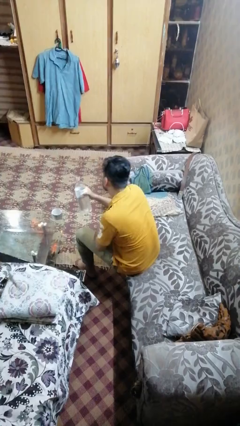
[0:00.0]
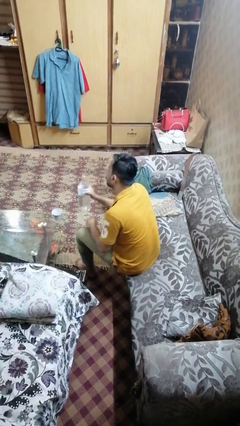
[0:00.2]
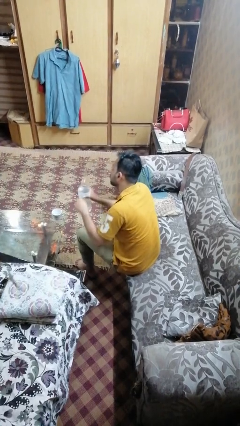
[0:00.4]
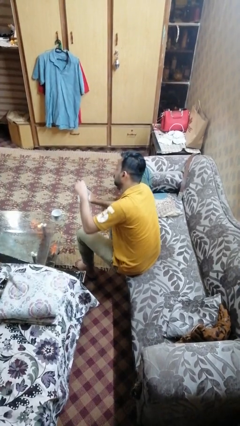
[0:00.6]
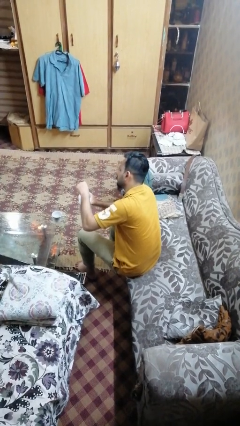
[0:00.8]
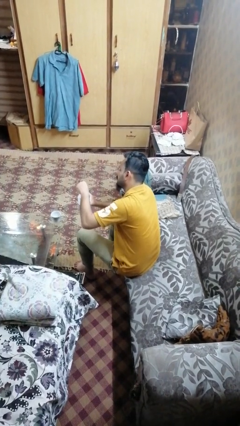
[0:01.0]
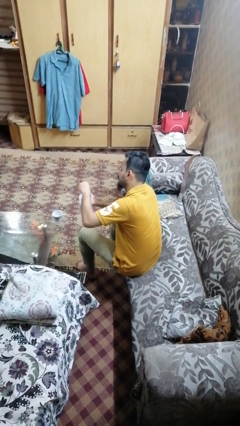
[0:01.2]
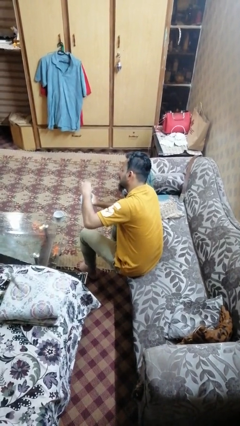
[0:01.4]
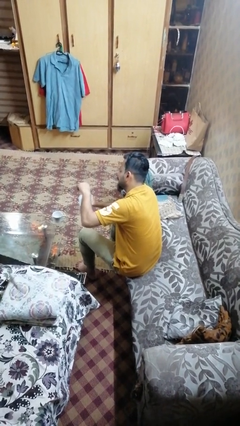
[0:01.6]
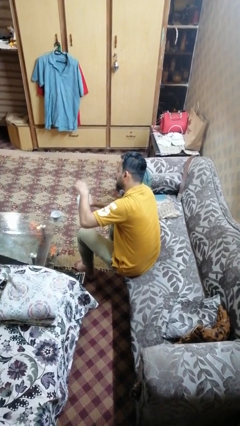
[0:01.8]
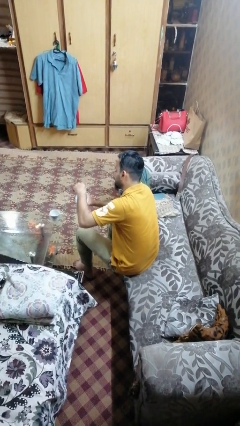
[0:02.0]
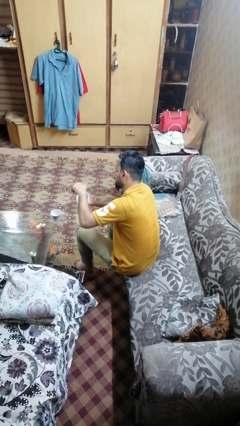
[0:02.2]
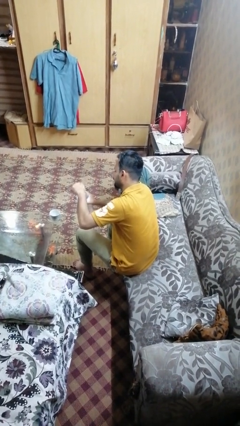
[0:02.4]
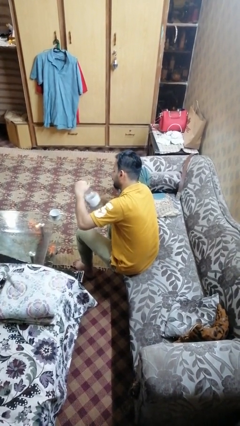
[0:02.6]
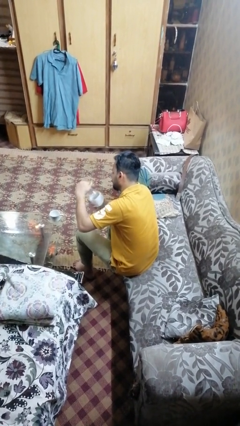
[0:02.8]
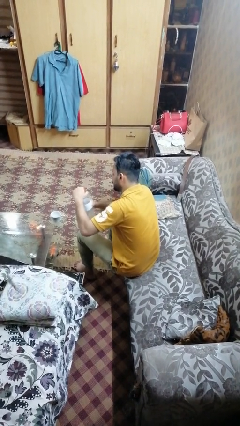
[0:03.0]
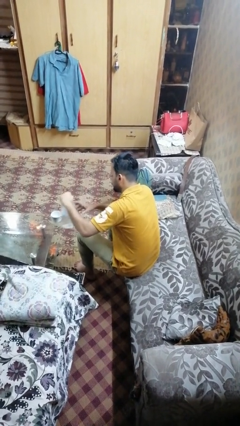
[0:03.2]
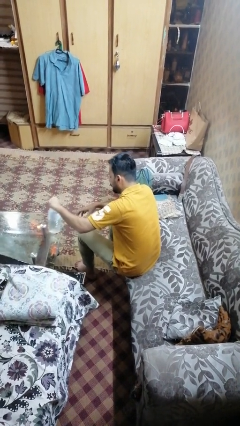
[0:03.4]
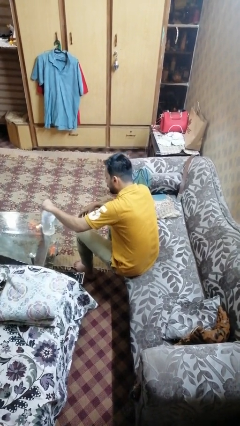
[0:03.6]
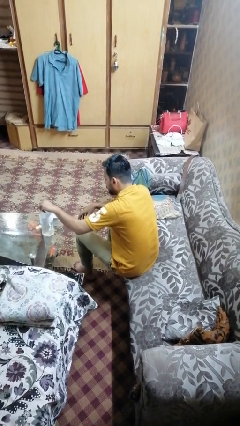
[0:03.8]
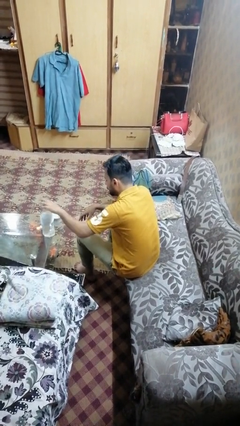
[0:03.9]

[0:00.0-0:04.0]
person screws lid to bottle

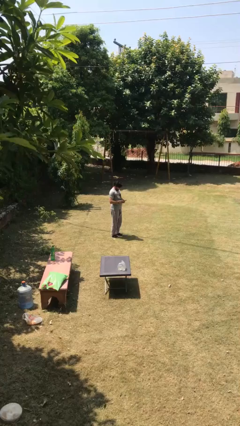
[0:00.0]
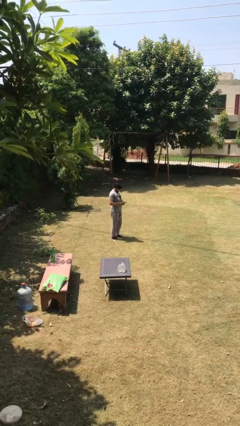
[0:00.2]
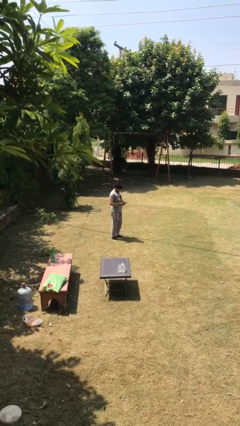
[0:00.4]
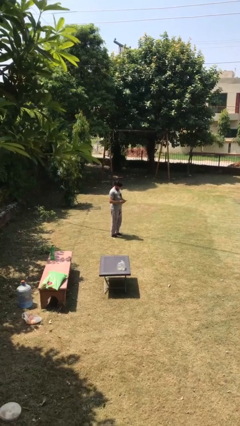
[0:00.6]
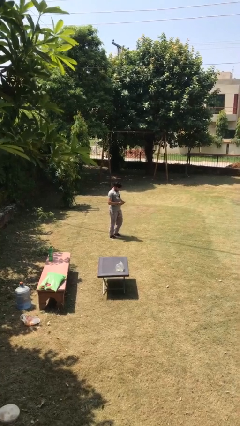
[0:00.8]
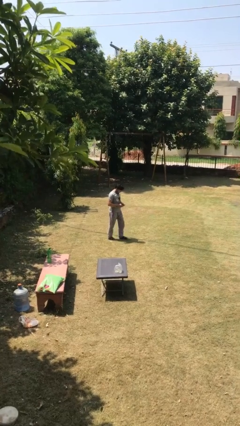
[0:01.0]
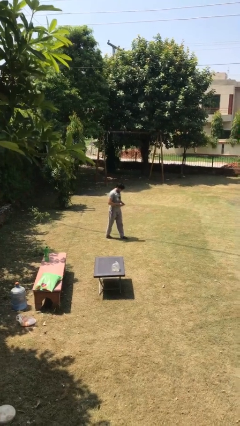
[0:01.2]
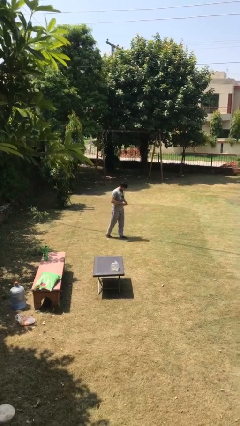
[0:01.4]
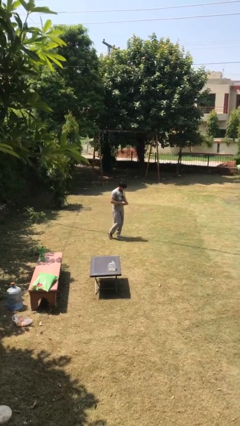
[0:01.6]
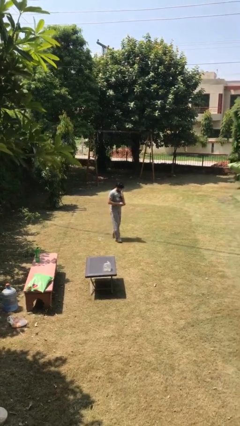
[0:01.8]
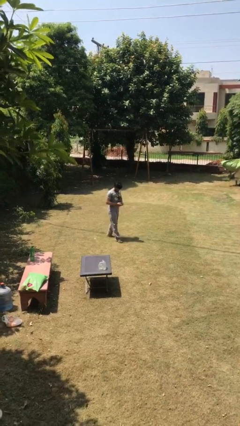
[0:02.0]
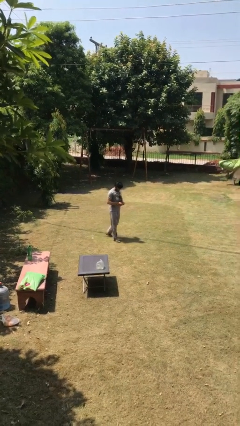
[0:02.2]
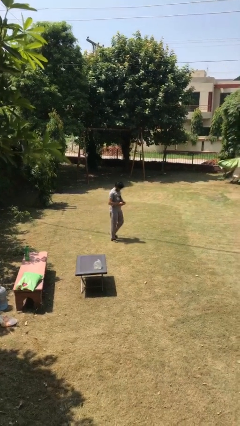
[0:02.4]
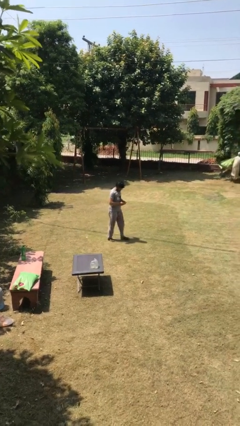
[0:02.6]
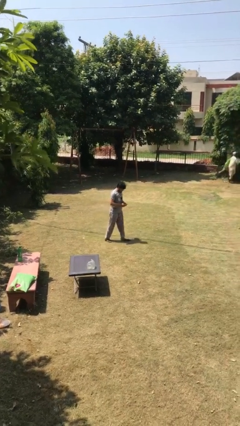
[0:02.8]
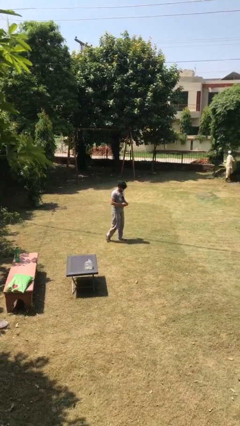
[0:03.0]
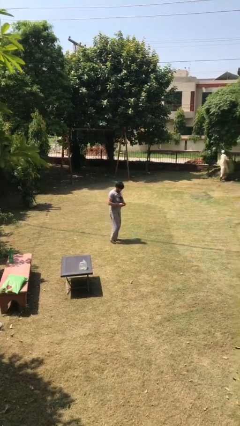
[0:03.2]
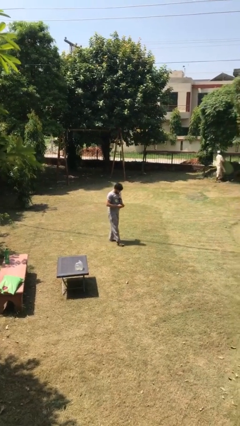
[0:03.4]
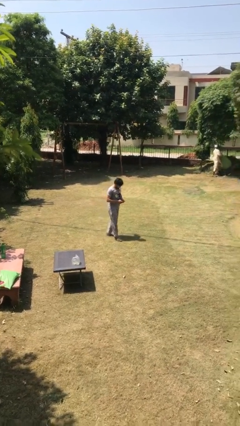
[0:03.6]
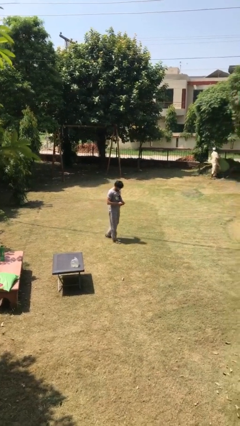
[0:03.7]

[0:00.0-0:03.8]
person texts on phone

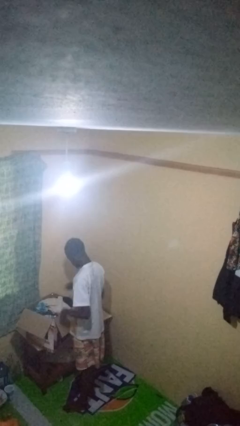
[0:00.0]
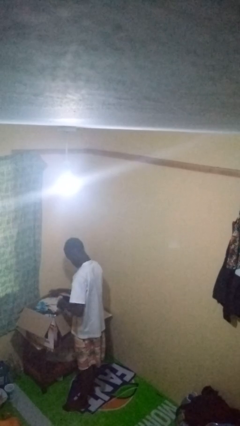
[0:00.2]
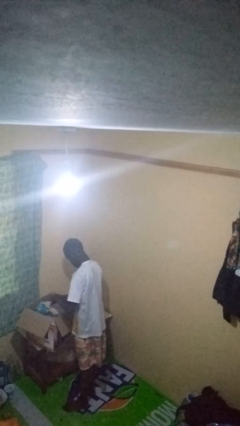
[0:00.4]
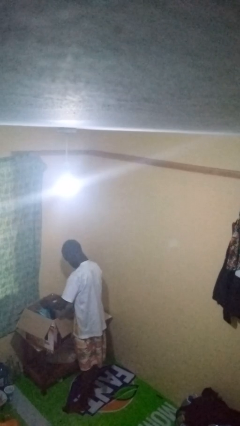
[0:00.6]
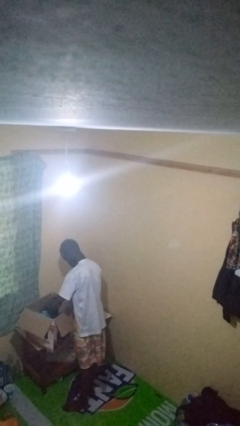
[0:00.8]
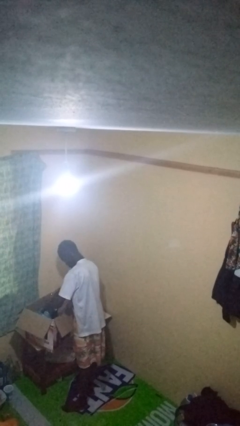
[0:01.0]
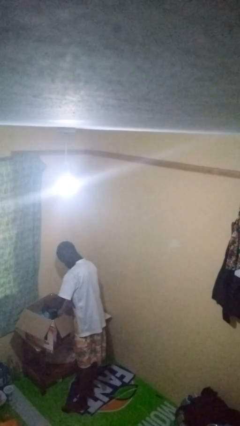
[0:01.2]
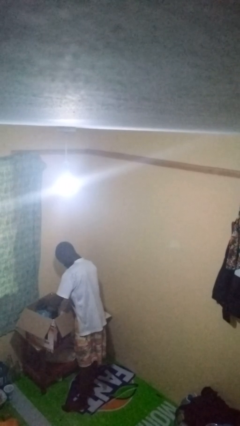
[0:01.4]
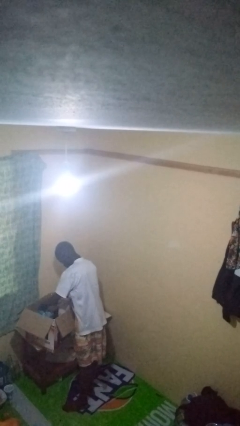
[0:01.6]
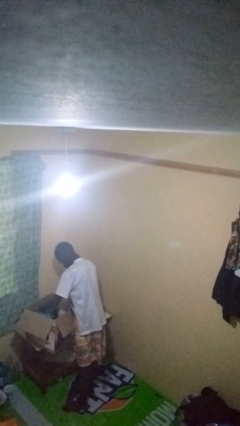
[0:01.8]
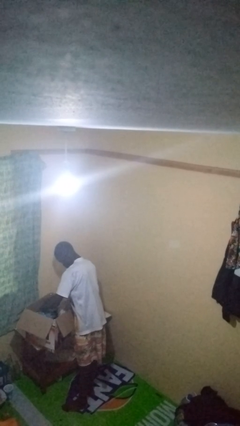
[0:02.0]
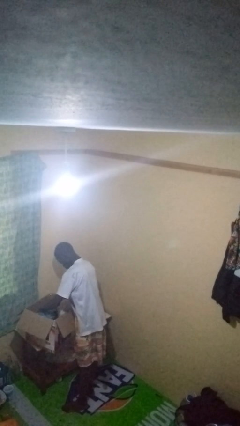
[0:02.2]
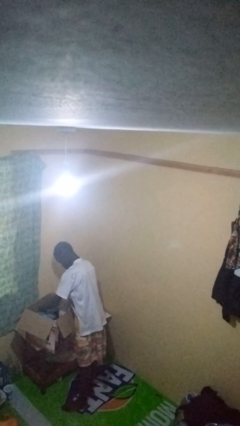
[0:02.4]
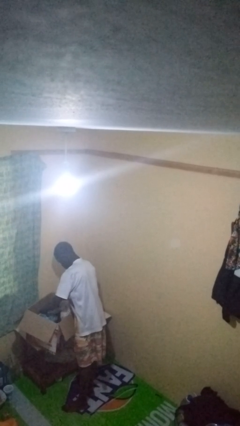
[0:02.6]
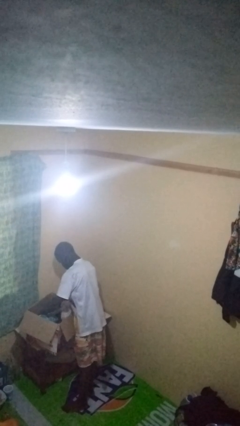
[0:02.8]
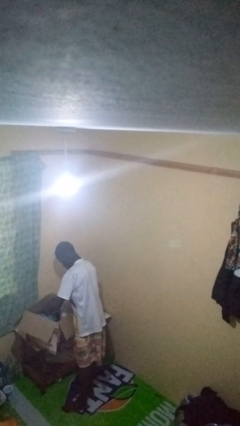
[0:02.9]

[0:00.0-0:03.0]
person searches in box

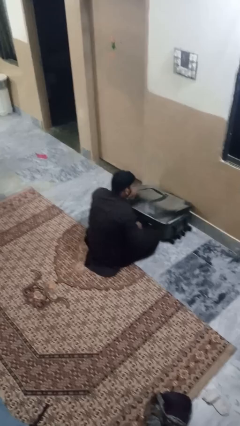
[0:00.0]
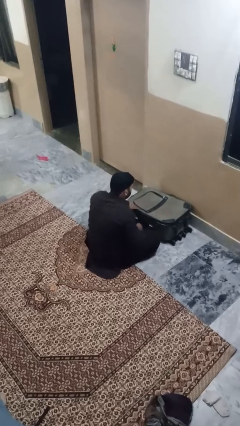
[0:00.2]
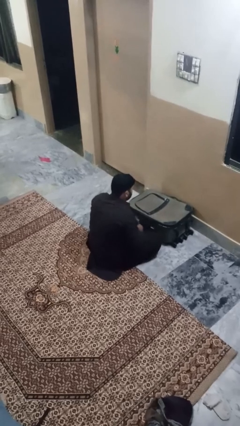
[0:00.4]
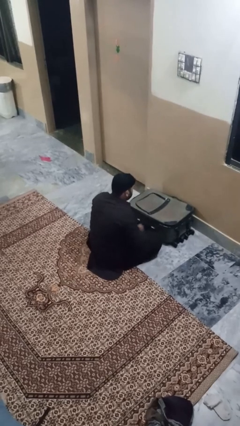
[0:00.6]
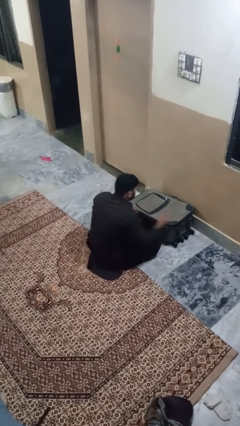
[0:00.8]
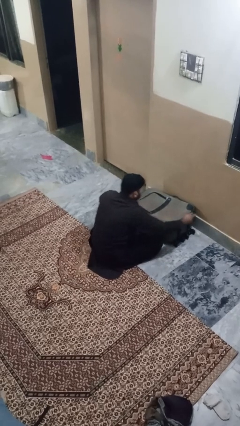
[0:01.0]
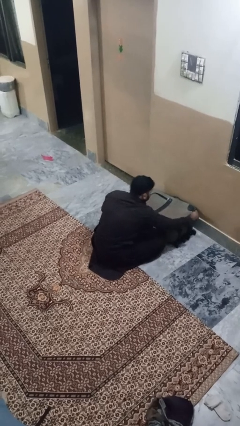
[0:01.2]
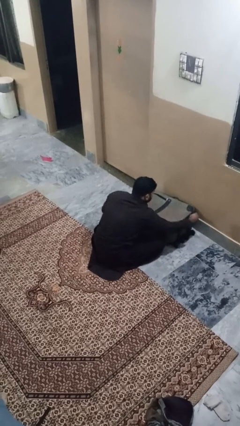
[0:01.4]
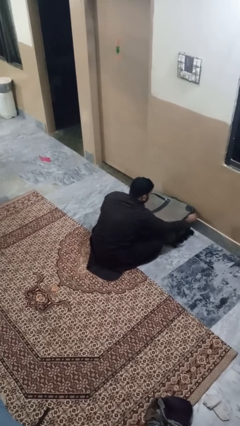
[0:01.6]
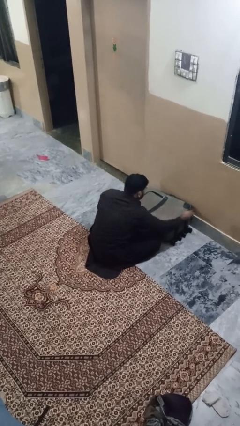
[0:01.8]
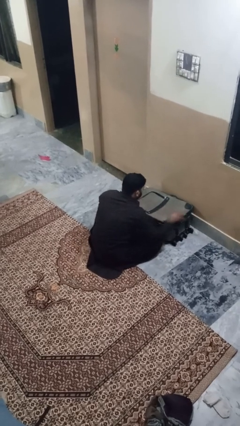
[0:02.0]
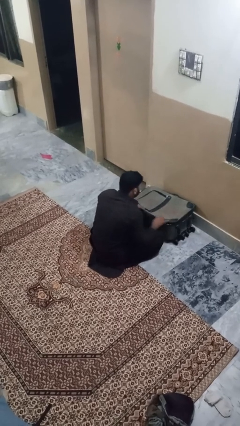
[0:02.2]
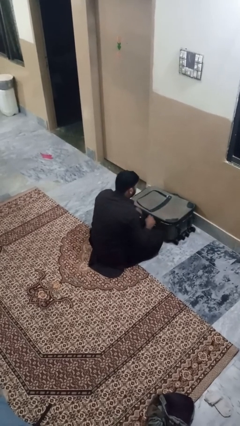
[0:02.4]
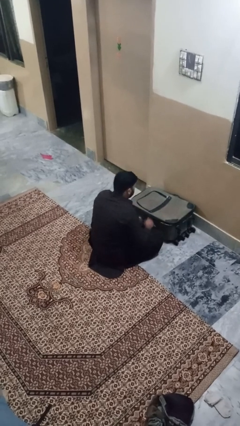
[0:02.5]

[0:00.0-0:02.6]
person closes suitcase

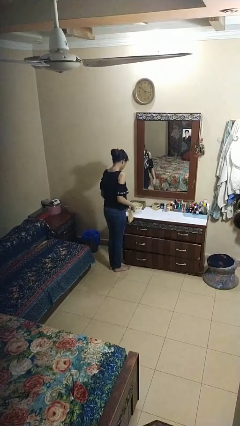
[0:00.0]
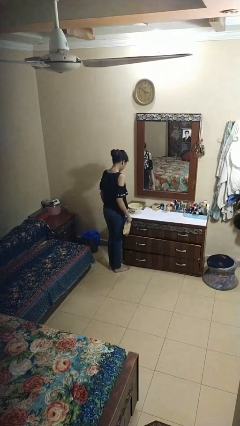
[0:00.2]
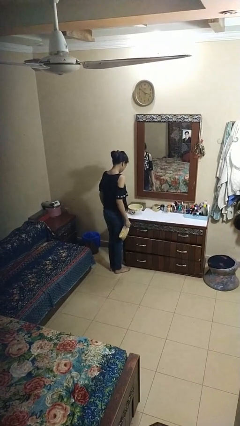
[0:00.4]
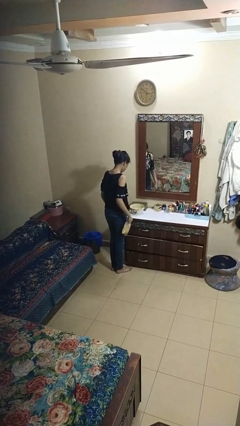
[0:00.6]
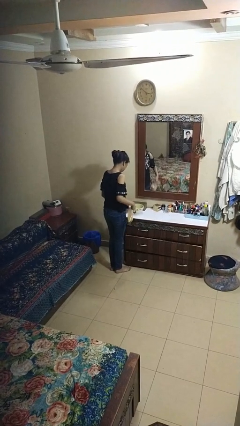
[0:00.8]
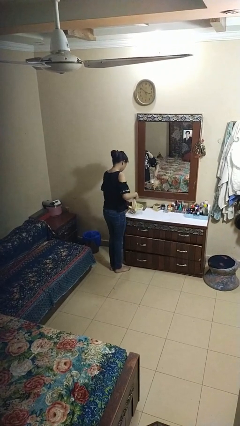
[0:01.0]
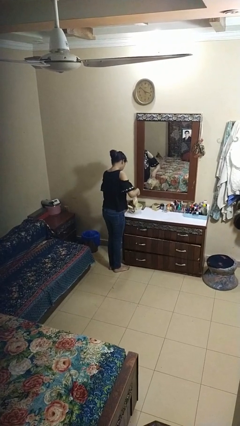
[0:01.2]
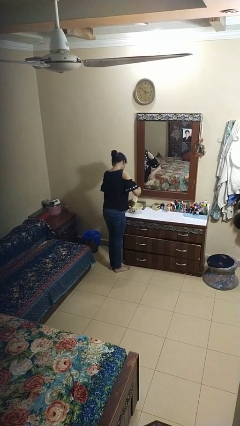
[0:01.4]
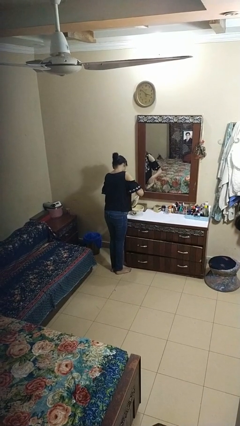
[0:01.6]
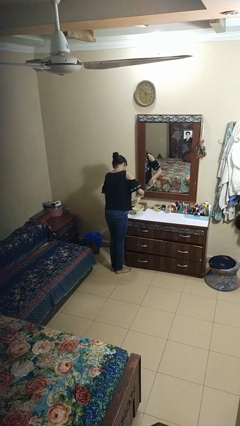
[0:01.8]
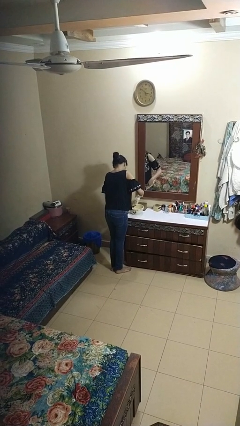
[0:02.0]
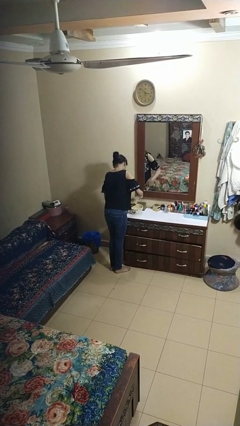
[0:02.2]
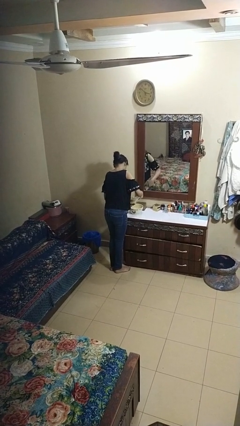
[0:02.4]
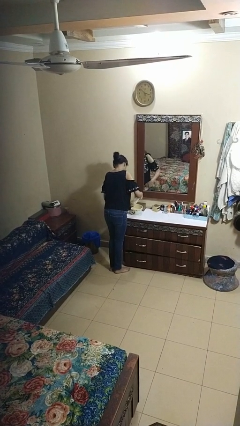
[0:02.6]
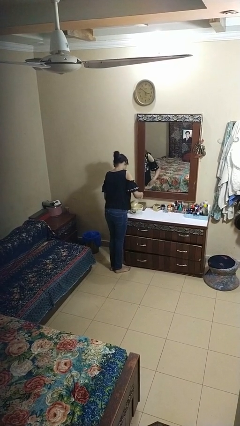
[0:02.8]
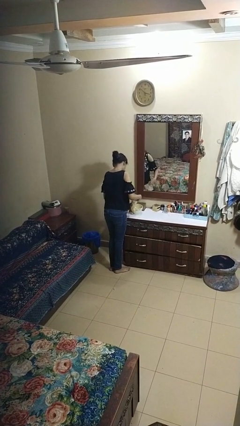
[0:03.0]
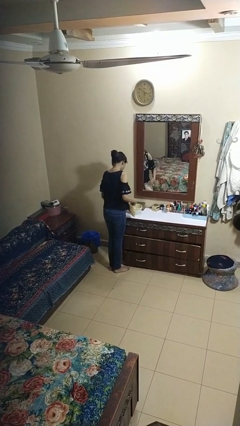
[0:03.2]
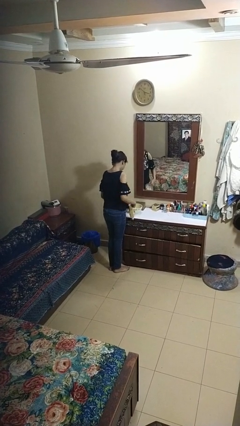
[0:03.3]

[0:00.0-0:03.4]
person pours into bowl

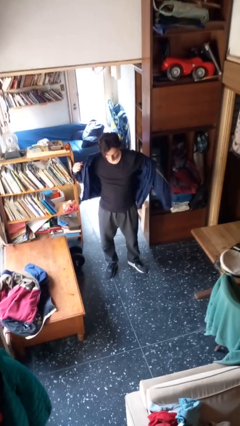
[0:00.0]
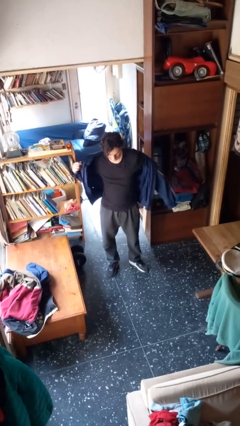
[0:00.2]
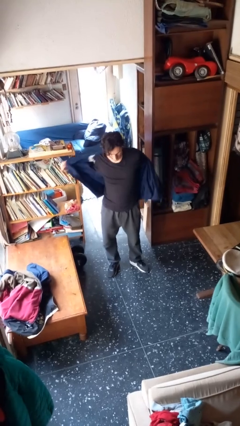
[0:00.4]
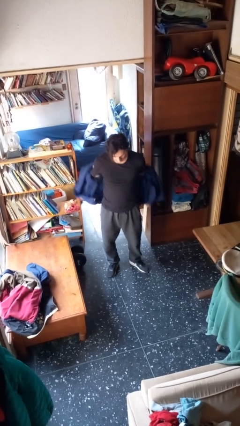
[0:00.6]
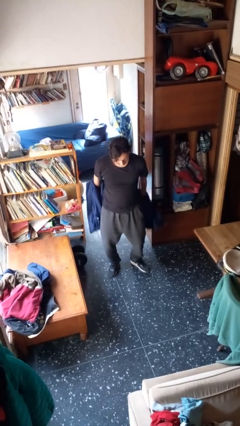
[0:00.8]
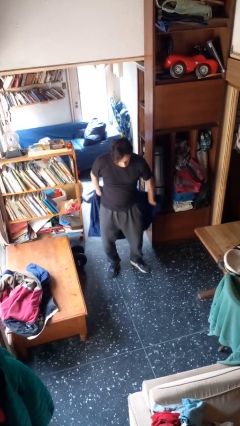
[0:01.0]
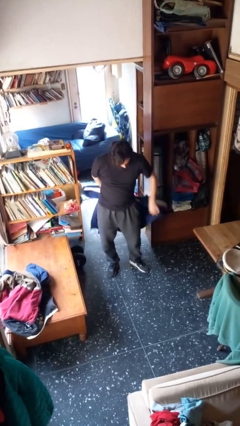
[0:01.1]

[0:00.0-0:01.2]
person takes off jacket
